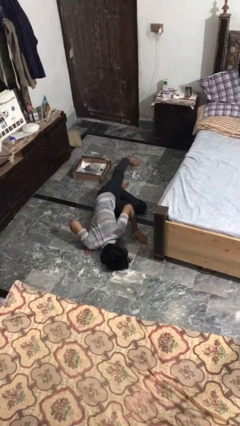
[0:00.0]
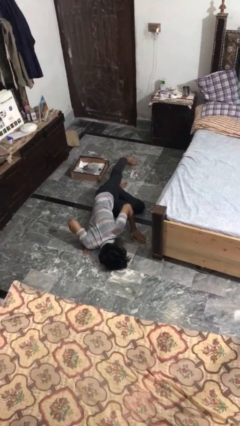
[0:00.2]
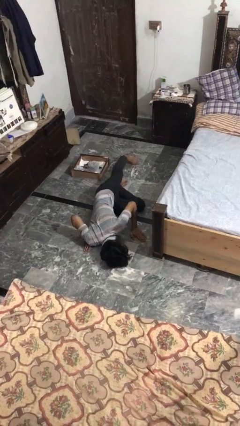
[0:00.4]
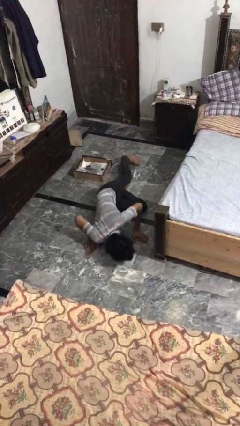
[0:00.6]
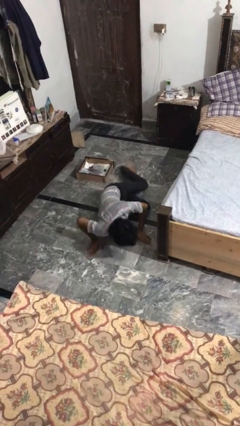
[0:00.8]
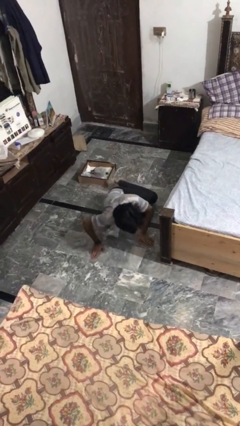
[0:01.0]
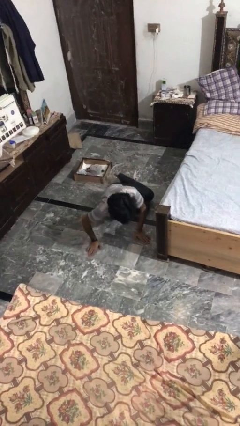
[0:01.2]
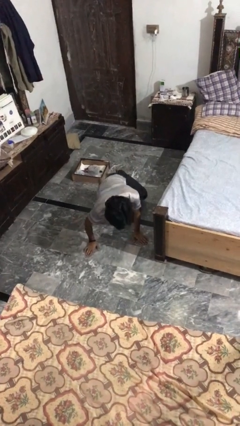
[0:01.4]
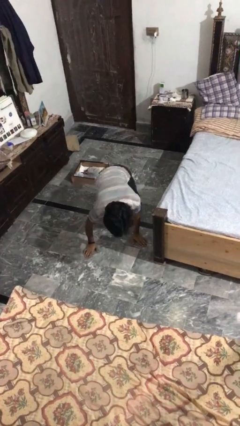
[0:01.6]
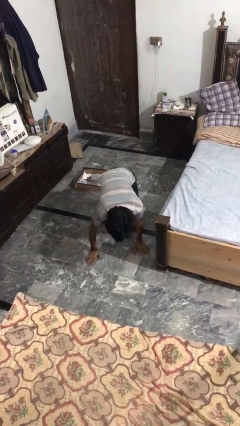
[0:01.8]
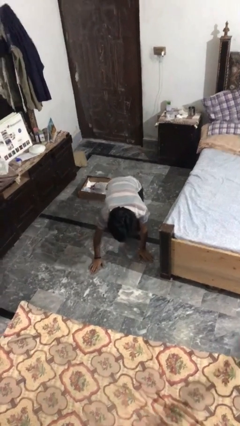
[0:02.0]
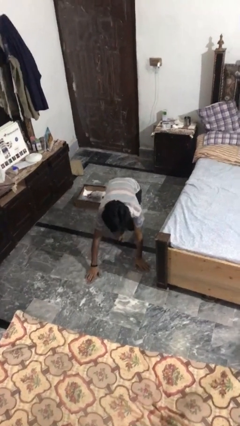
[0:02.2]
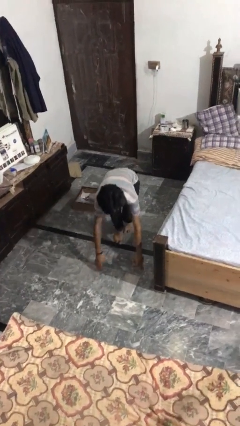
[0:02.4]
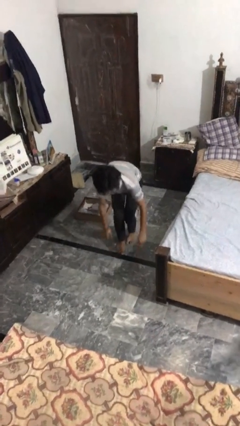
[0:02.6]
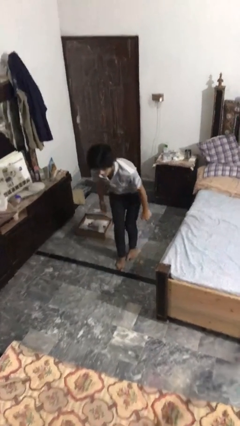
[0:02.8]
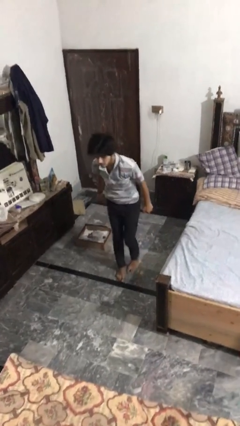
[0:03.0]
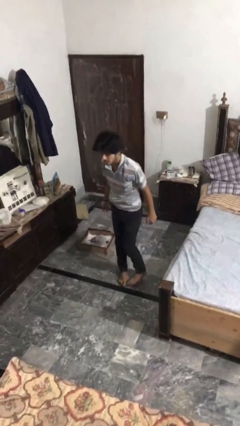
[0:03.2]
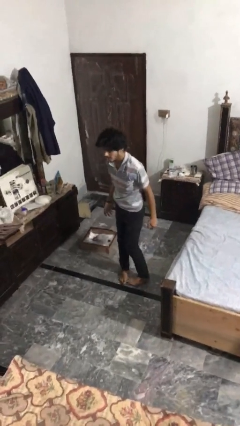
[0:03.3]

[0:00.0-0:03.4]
person stands up from floor

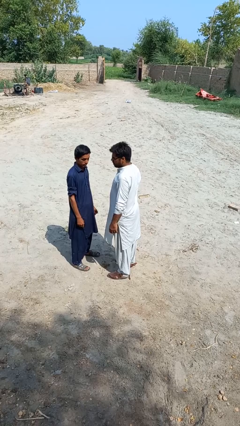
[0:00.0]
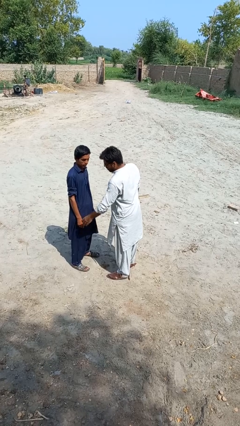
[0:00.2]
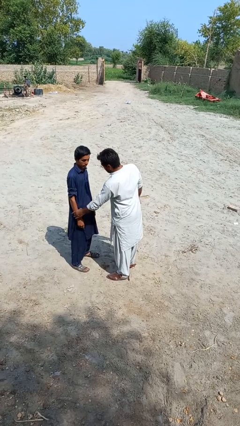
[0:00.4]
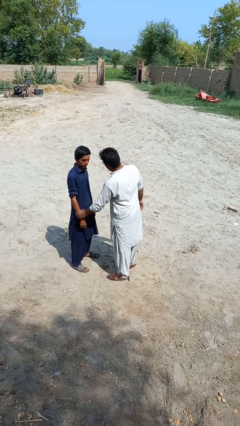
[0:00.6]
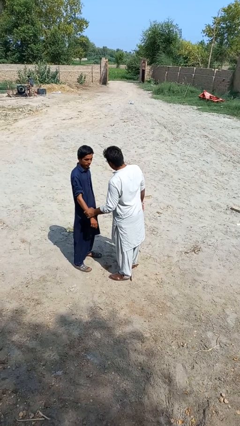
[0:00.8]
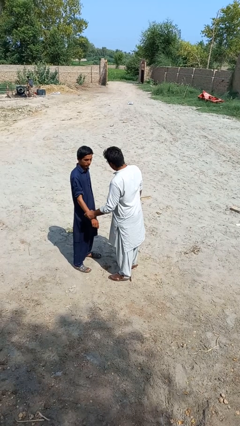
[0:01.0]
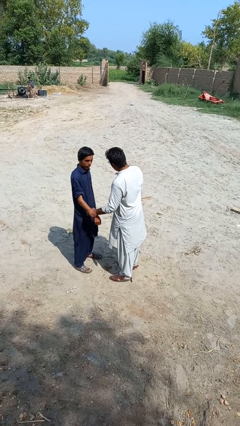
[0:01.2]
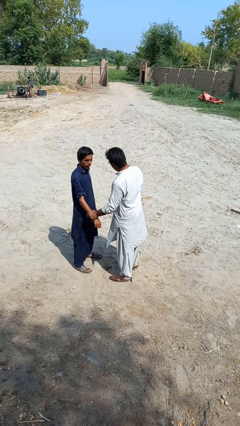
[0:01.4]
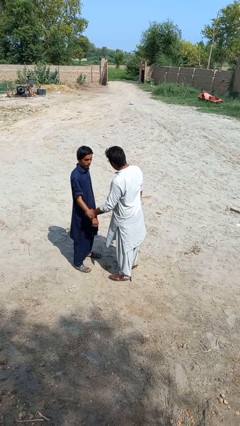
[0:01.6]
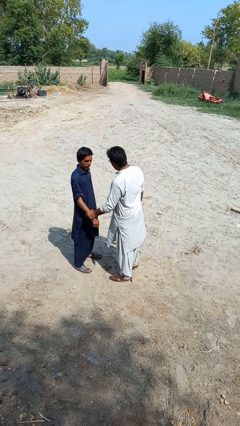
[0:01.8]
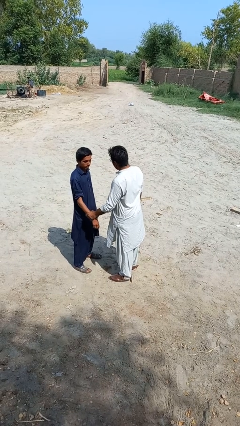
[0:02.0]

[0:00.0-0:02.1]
person grabs person by forearm

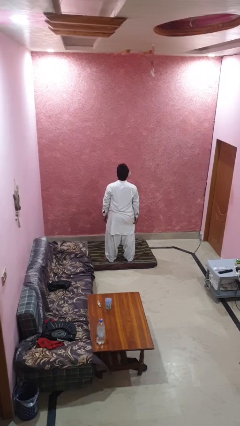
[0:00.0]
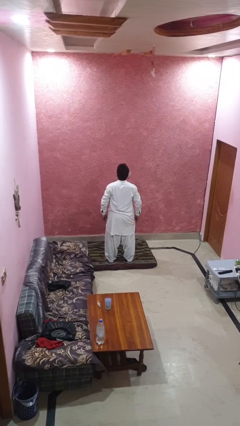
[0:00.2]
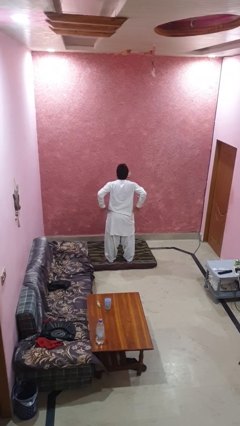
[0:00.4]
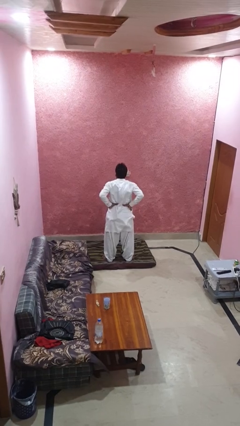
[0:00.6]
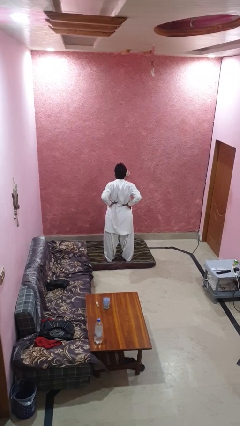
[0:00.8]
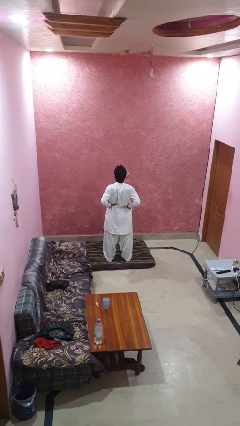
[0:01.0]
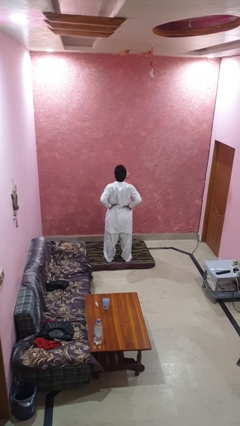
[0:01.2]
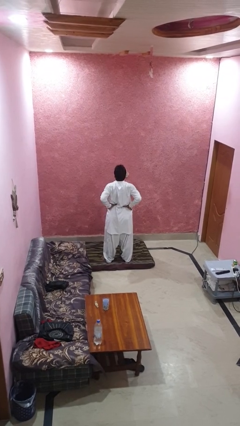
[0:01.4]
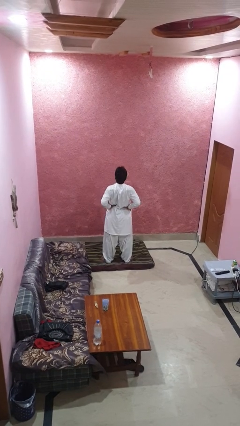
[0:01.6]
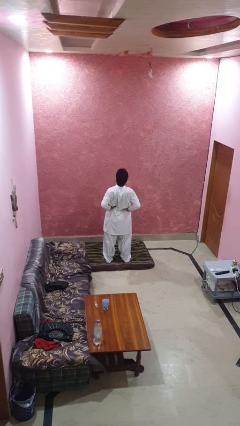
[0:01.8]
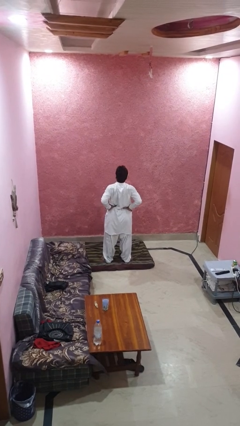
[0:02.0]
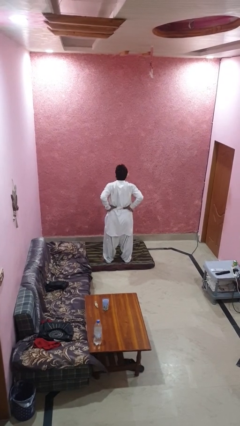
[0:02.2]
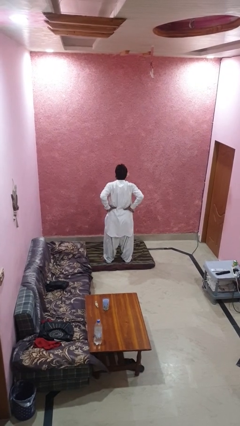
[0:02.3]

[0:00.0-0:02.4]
person stretches back

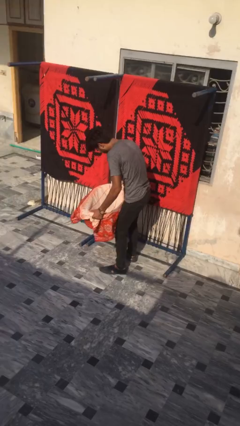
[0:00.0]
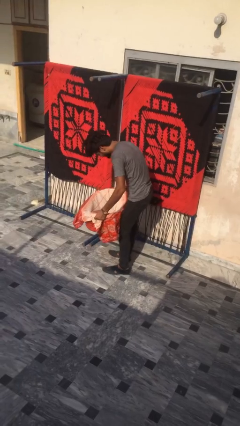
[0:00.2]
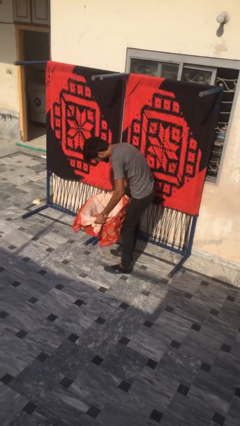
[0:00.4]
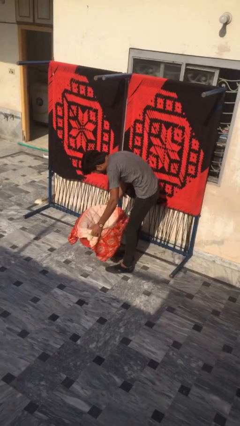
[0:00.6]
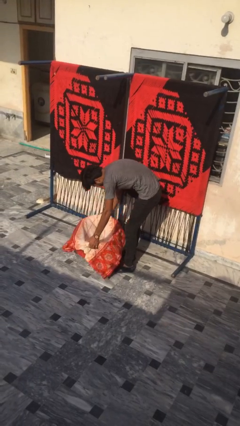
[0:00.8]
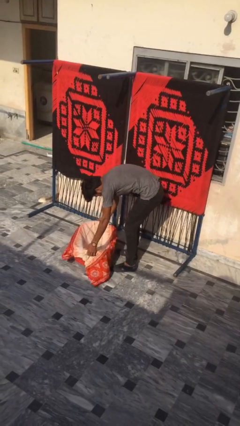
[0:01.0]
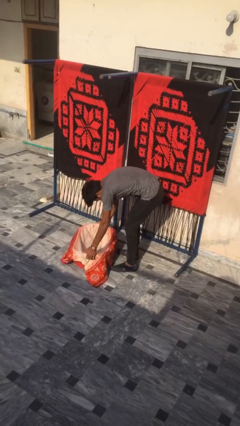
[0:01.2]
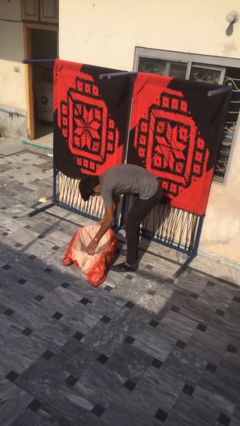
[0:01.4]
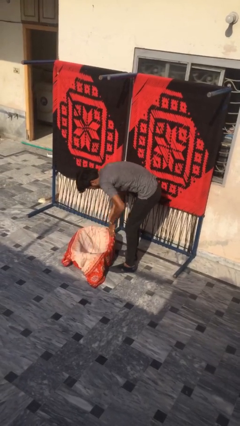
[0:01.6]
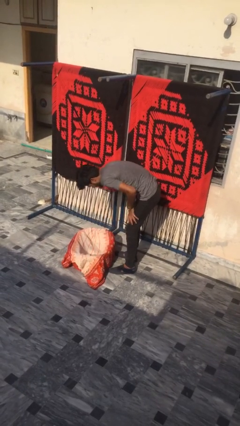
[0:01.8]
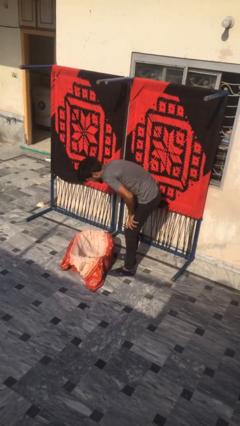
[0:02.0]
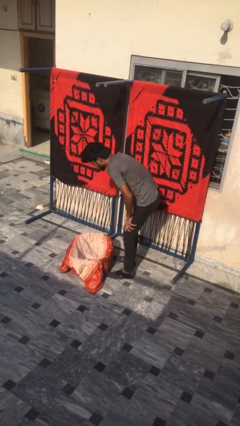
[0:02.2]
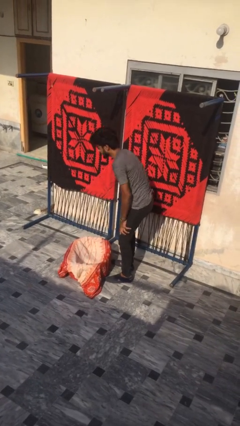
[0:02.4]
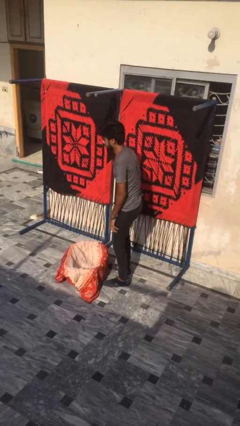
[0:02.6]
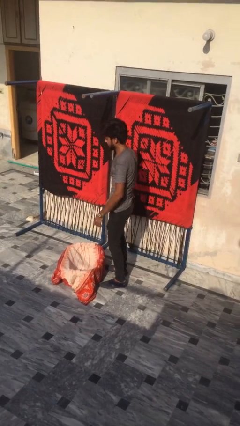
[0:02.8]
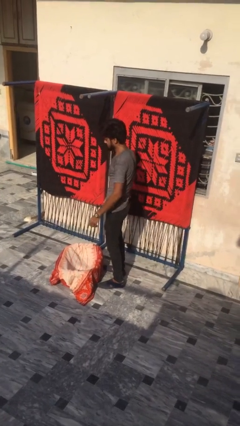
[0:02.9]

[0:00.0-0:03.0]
person puts down object on floor

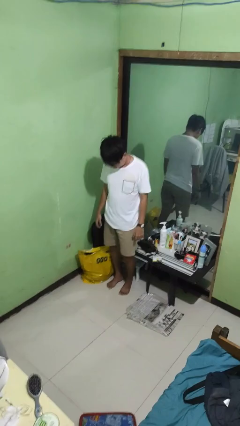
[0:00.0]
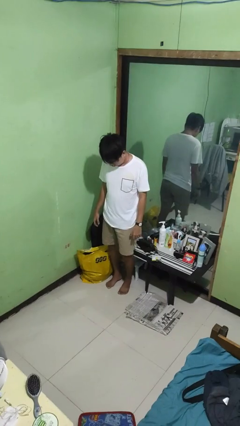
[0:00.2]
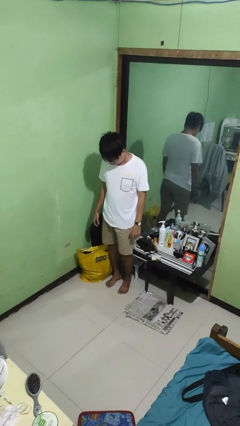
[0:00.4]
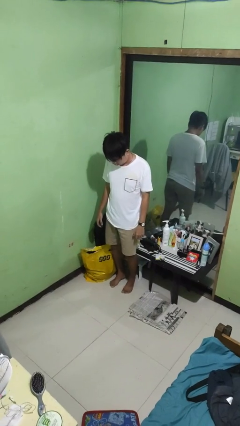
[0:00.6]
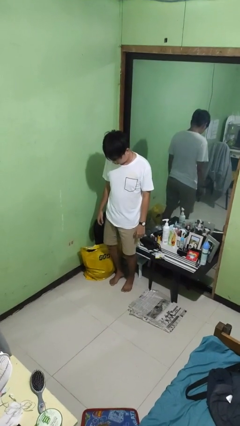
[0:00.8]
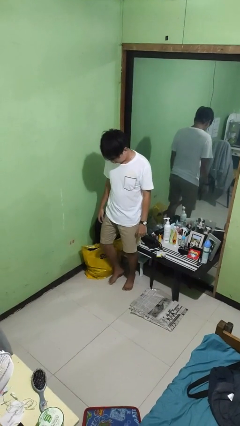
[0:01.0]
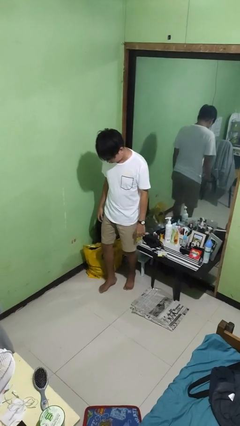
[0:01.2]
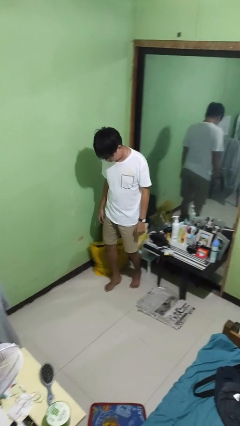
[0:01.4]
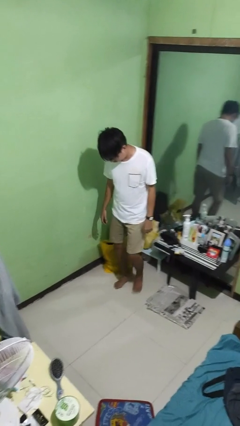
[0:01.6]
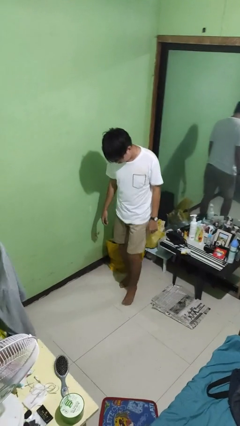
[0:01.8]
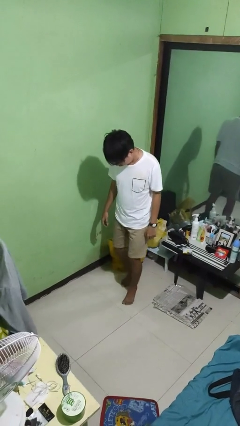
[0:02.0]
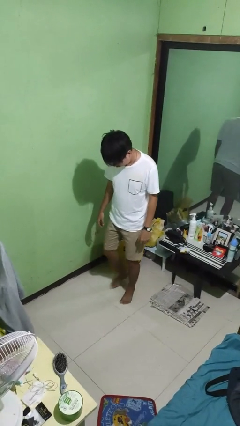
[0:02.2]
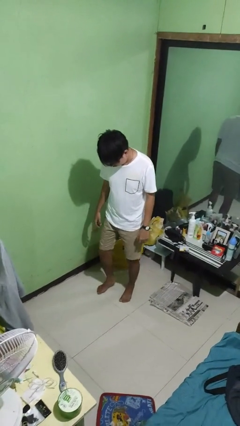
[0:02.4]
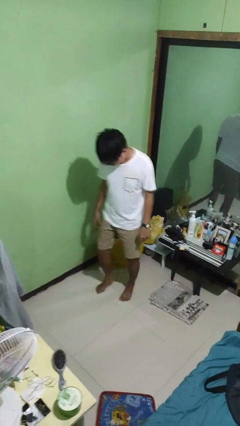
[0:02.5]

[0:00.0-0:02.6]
person walks tiptoe

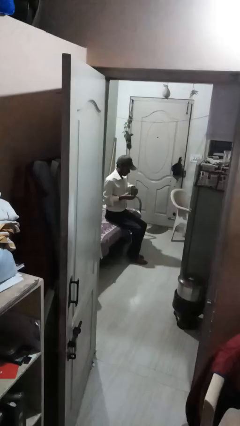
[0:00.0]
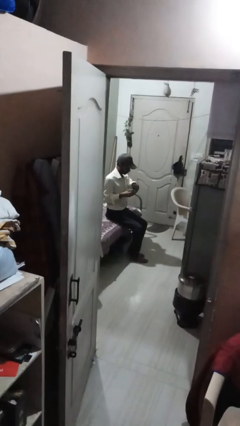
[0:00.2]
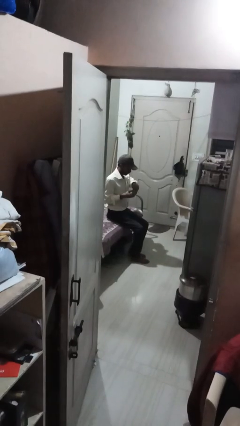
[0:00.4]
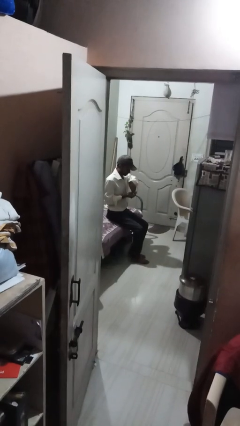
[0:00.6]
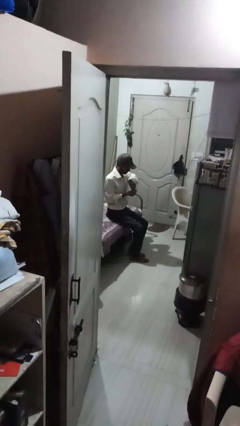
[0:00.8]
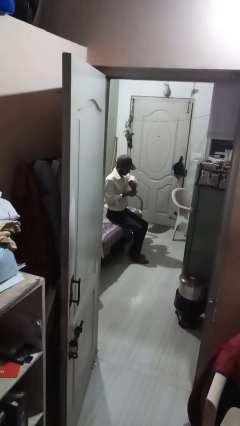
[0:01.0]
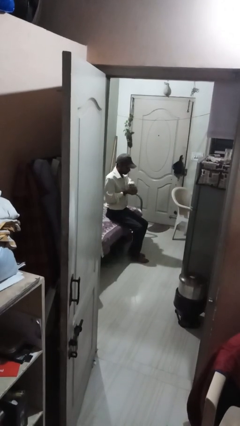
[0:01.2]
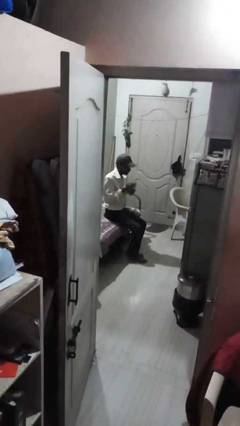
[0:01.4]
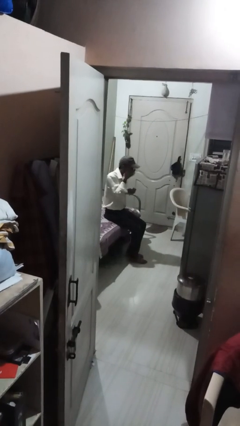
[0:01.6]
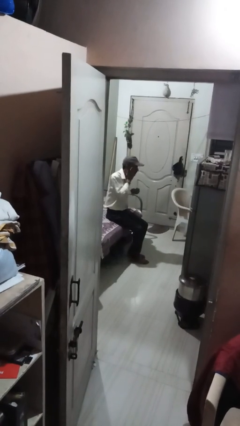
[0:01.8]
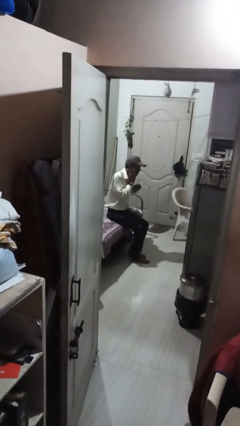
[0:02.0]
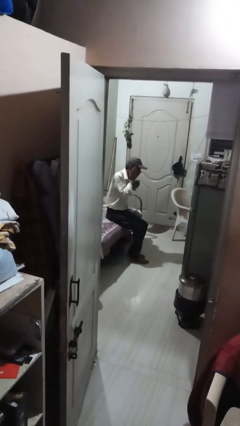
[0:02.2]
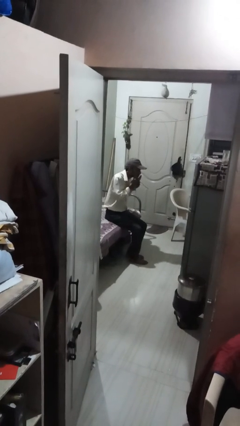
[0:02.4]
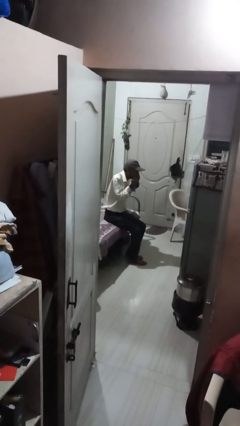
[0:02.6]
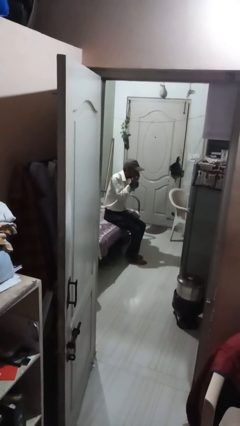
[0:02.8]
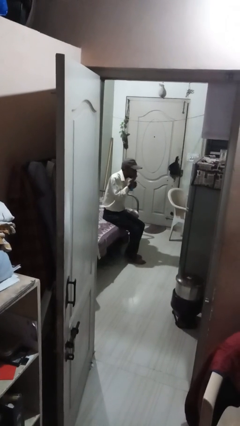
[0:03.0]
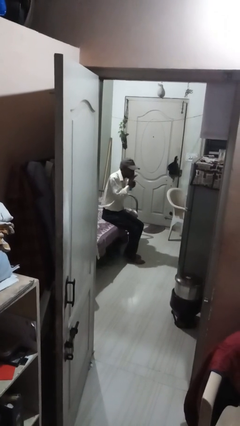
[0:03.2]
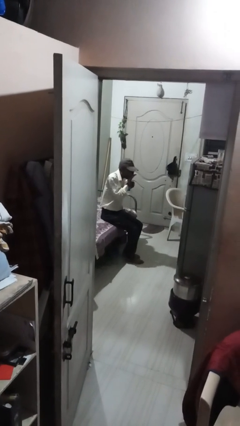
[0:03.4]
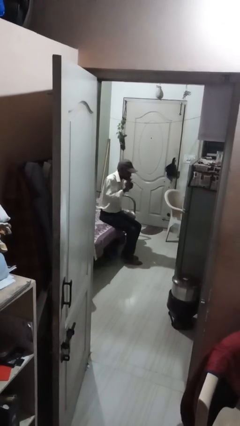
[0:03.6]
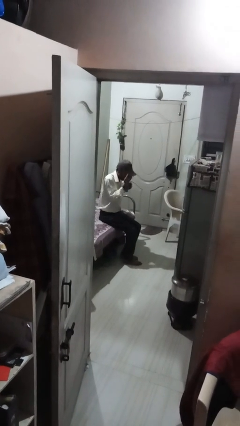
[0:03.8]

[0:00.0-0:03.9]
person applies facial moisturizer

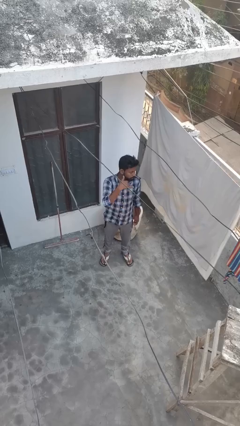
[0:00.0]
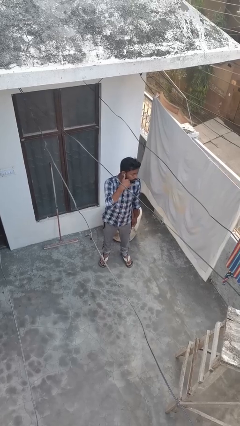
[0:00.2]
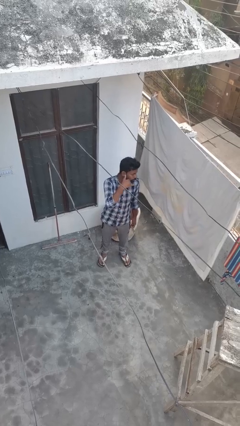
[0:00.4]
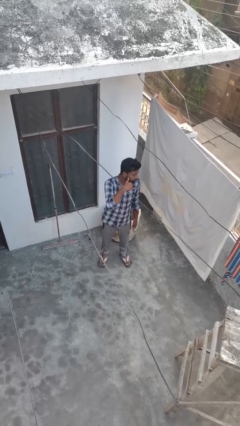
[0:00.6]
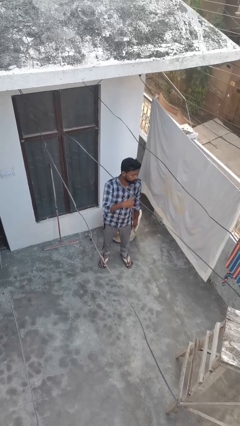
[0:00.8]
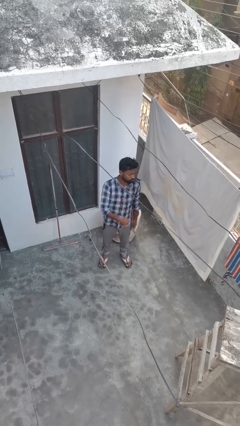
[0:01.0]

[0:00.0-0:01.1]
person gestures call me
